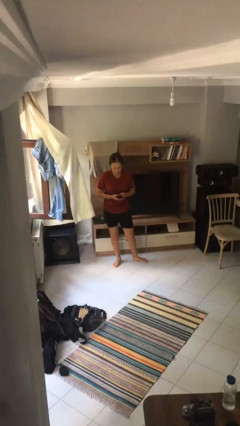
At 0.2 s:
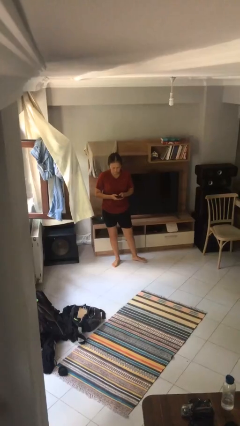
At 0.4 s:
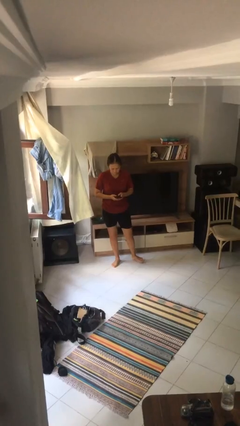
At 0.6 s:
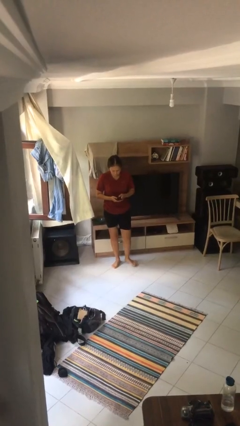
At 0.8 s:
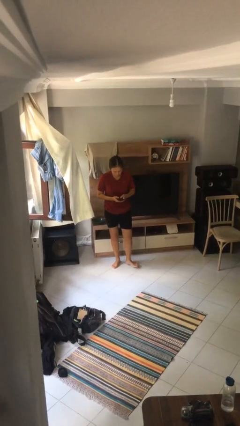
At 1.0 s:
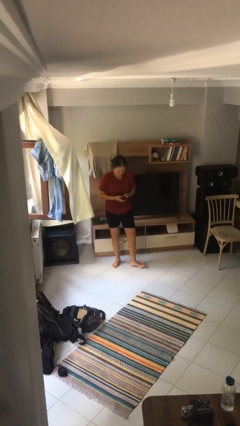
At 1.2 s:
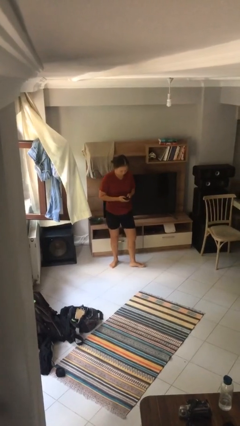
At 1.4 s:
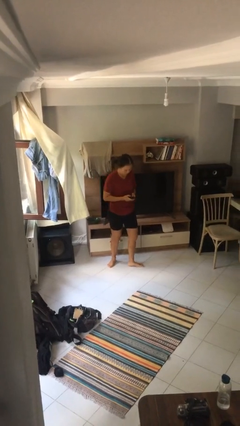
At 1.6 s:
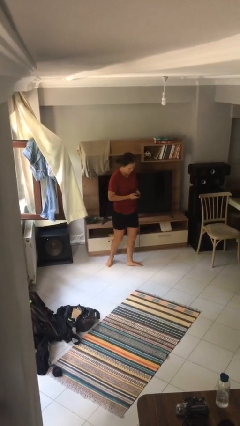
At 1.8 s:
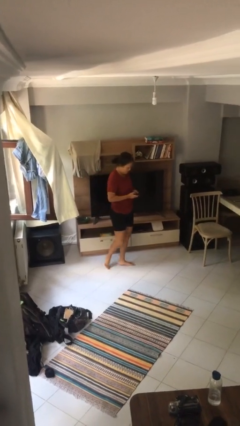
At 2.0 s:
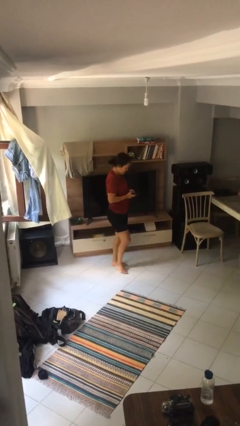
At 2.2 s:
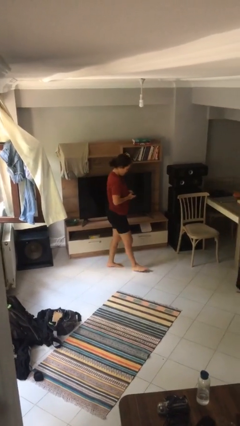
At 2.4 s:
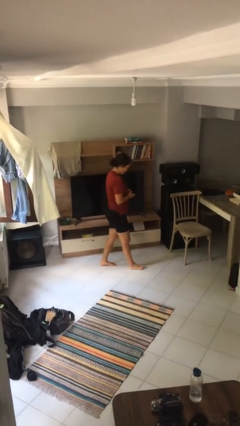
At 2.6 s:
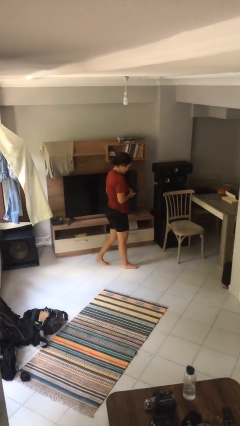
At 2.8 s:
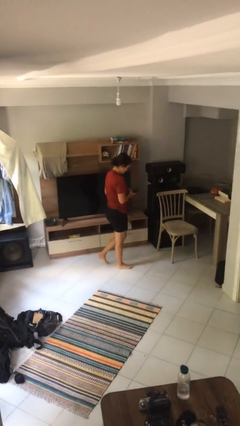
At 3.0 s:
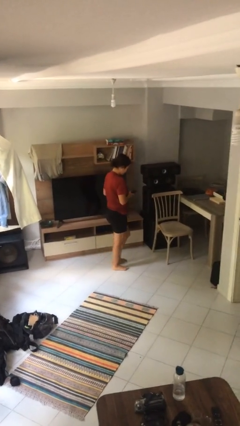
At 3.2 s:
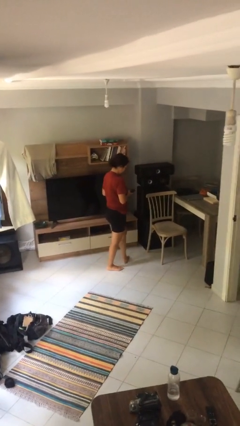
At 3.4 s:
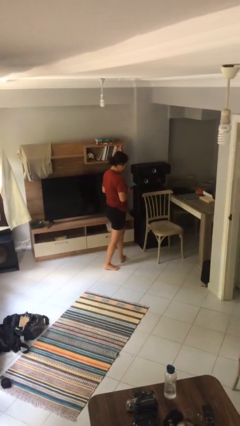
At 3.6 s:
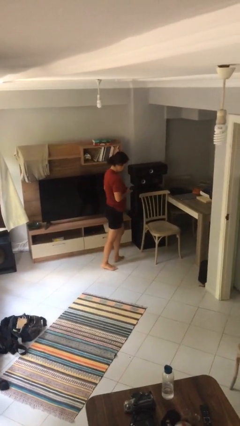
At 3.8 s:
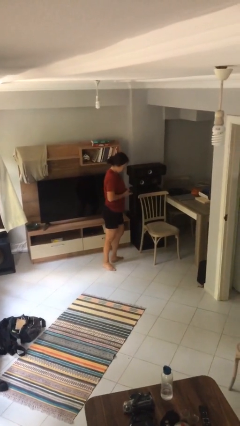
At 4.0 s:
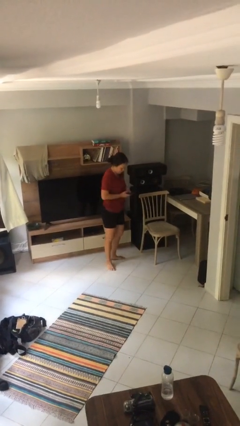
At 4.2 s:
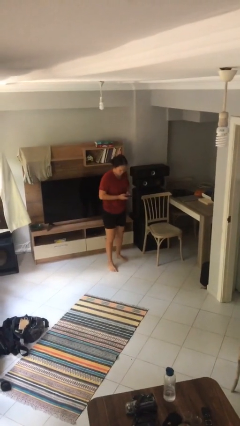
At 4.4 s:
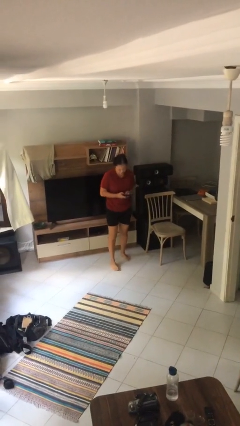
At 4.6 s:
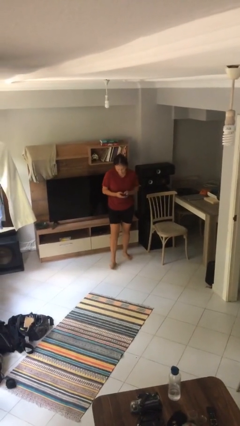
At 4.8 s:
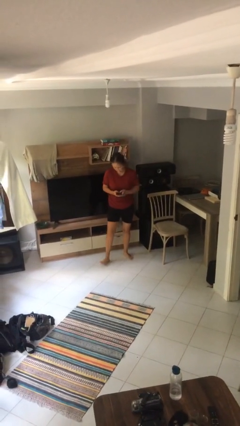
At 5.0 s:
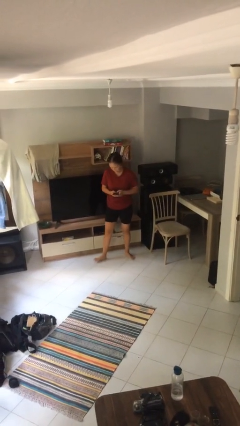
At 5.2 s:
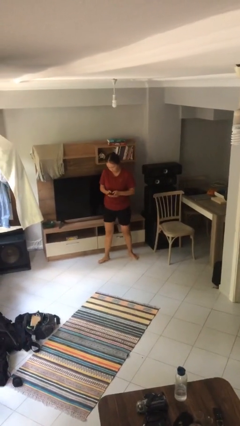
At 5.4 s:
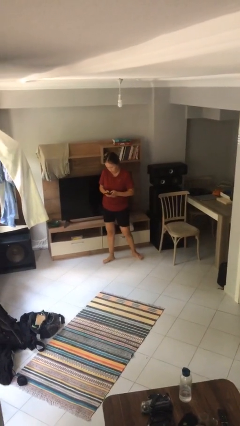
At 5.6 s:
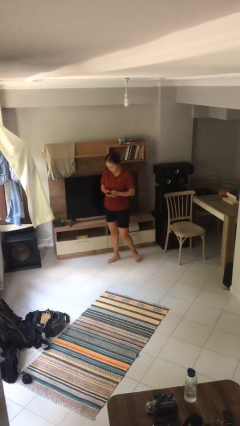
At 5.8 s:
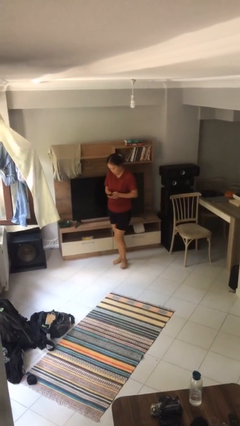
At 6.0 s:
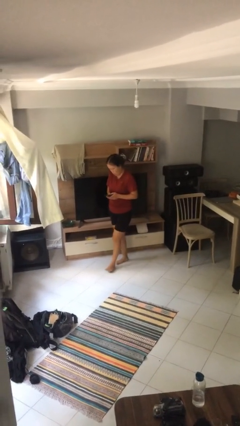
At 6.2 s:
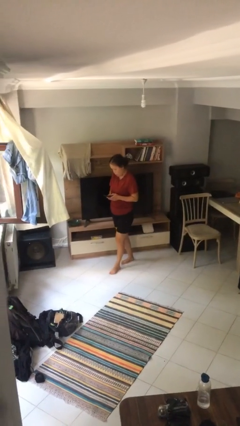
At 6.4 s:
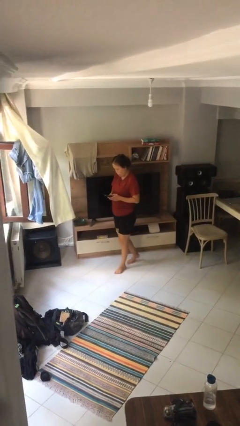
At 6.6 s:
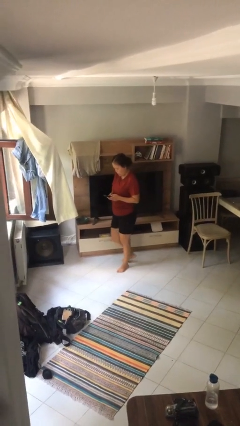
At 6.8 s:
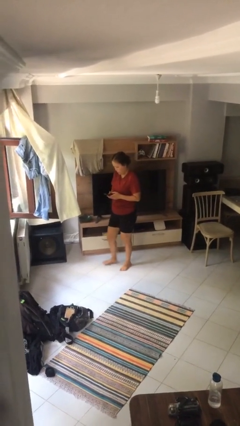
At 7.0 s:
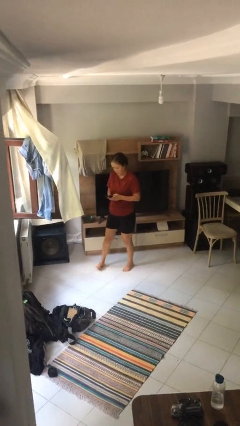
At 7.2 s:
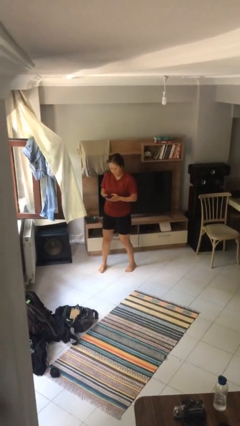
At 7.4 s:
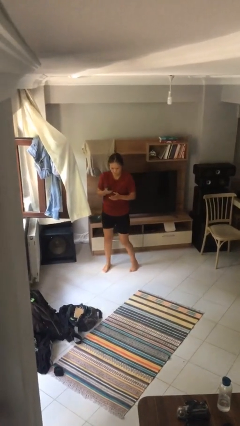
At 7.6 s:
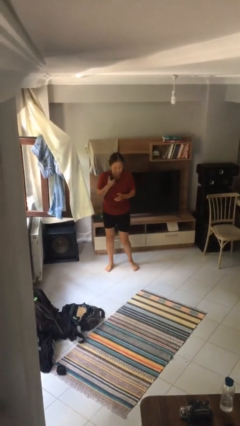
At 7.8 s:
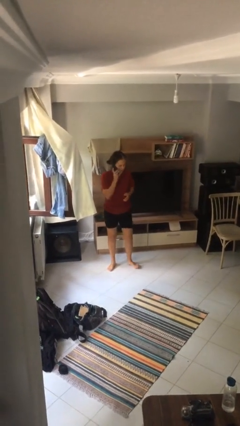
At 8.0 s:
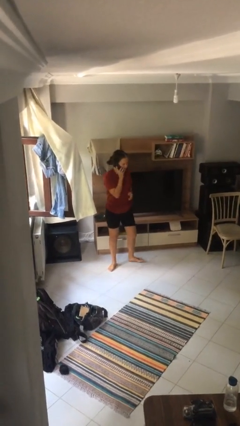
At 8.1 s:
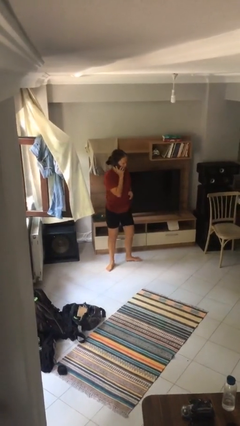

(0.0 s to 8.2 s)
person texts on phone

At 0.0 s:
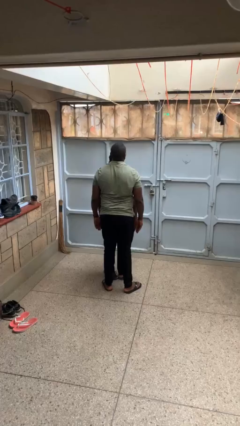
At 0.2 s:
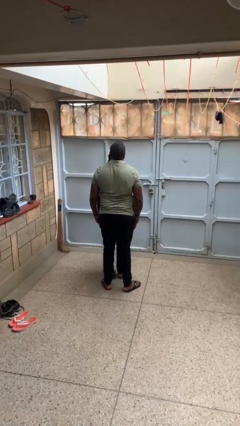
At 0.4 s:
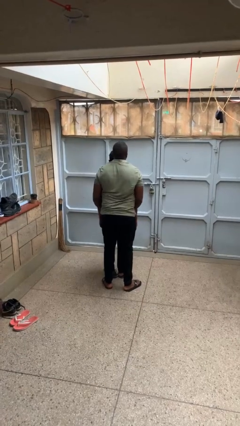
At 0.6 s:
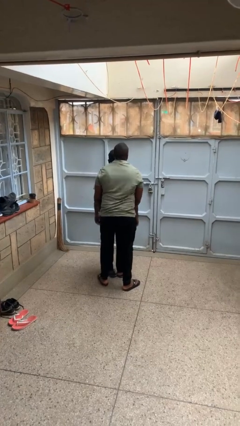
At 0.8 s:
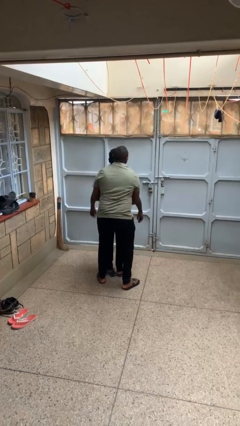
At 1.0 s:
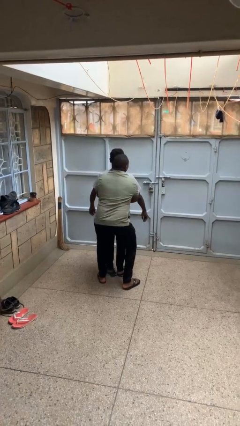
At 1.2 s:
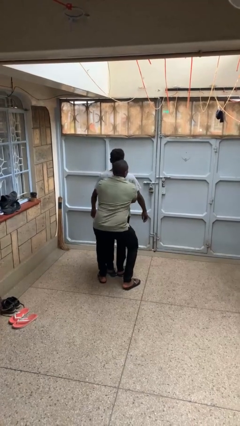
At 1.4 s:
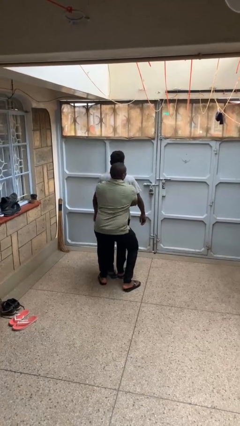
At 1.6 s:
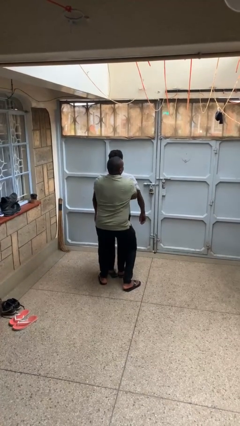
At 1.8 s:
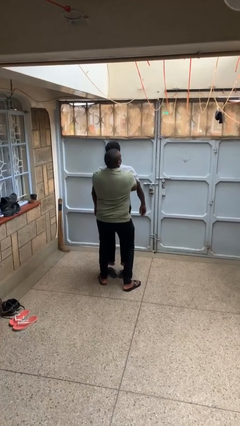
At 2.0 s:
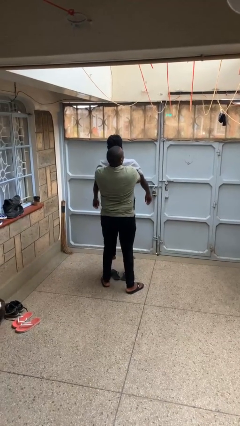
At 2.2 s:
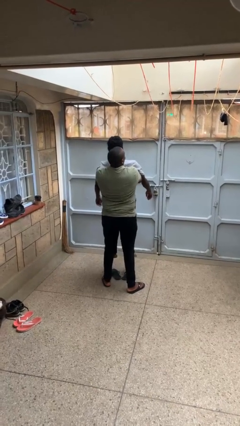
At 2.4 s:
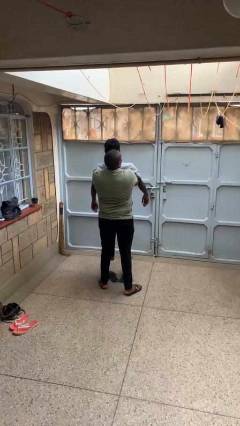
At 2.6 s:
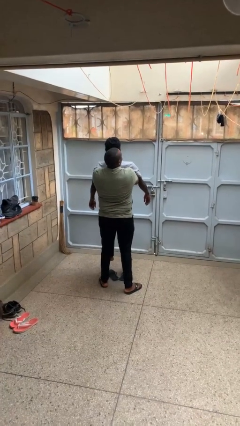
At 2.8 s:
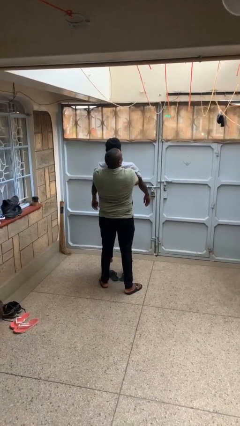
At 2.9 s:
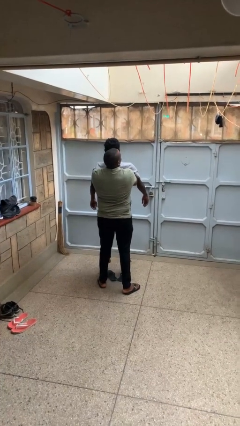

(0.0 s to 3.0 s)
person picks up person

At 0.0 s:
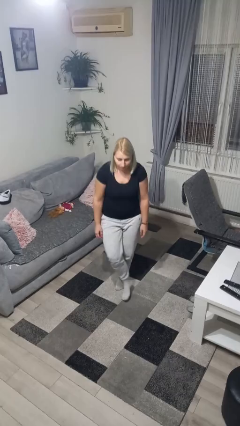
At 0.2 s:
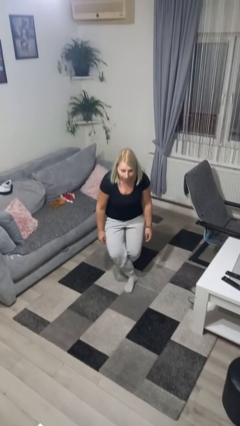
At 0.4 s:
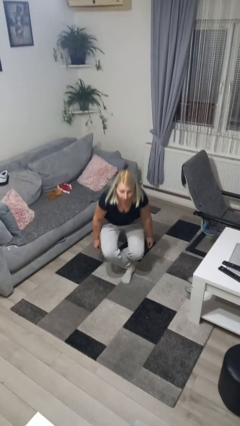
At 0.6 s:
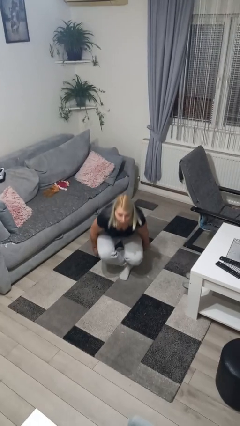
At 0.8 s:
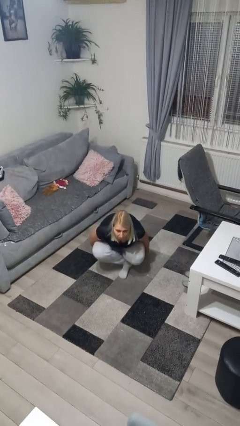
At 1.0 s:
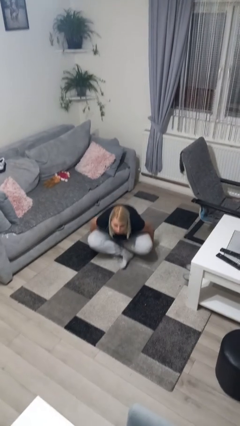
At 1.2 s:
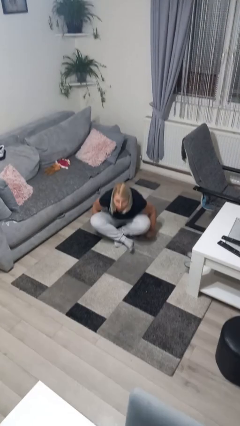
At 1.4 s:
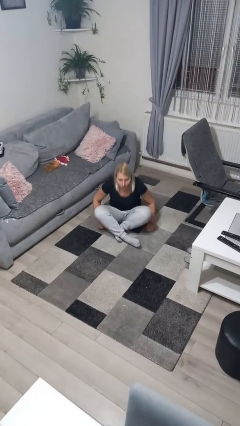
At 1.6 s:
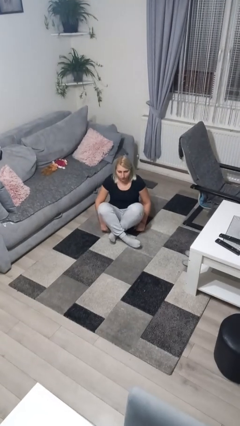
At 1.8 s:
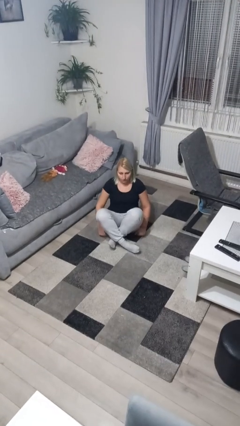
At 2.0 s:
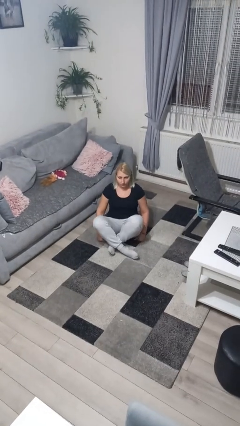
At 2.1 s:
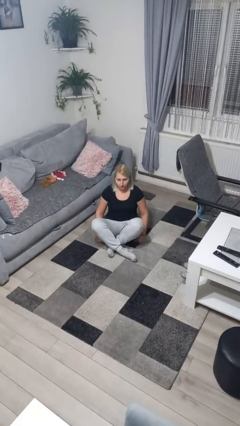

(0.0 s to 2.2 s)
person sits crisscross

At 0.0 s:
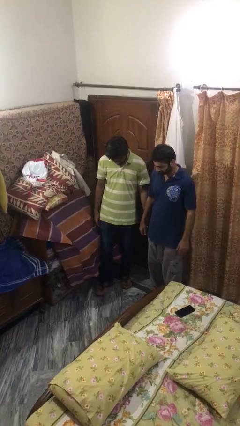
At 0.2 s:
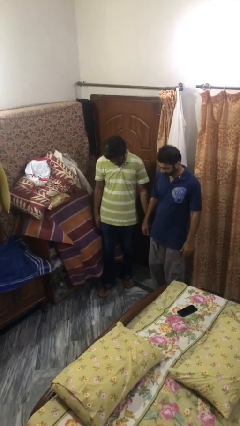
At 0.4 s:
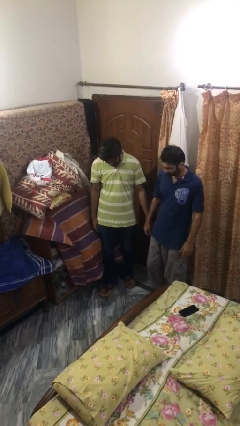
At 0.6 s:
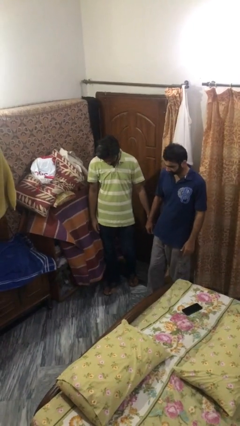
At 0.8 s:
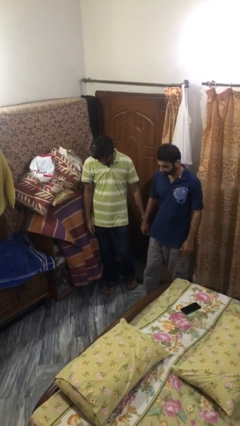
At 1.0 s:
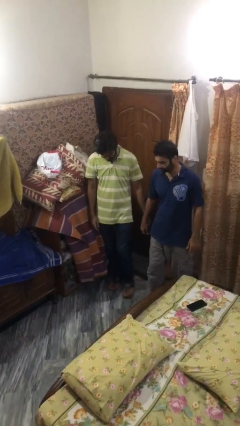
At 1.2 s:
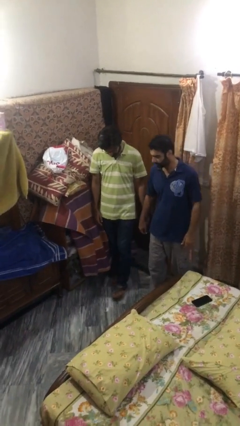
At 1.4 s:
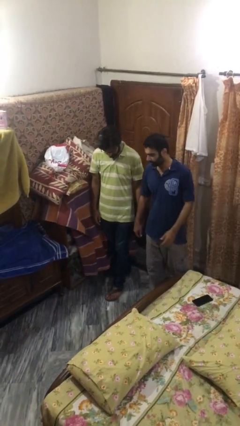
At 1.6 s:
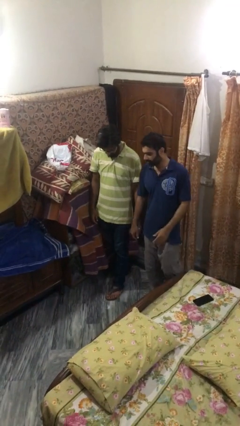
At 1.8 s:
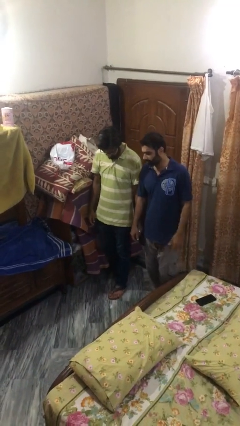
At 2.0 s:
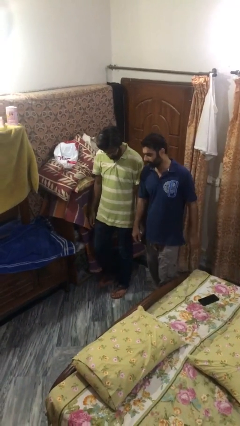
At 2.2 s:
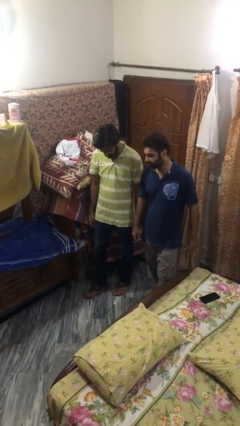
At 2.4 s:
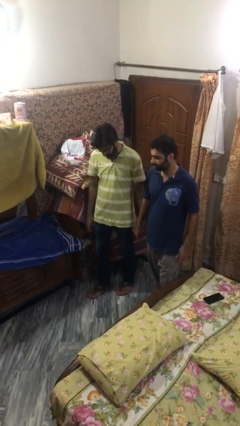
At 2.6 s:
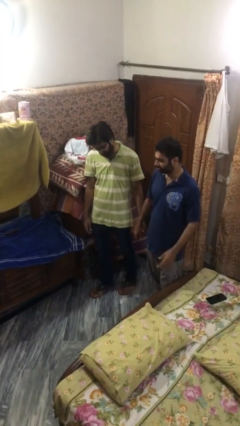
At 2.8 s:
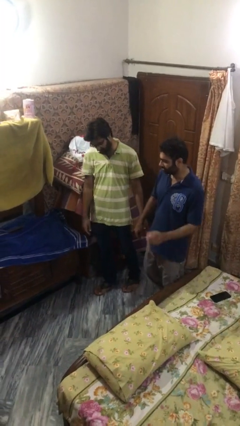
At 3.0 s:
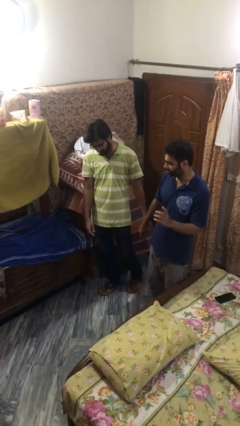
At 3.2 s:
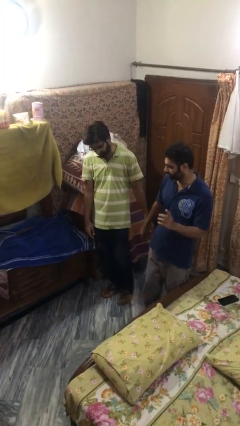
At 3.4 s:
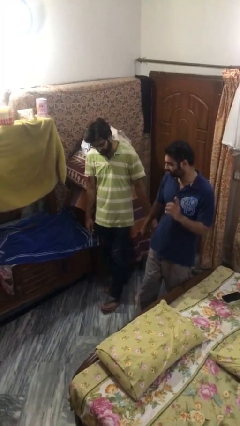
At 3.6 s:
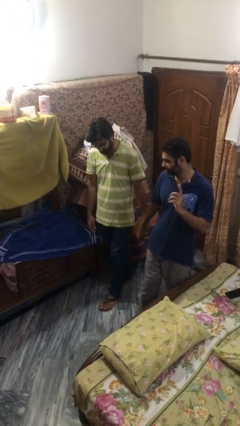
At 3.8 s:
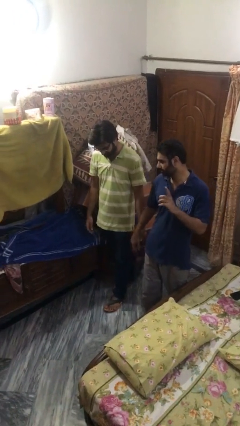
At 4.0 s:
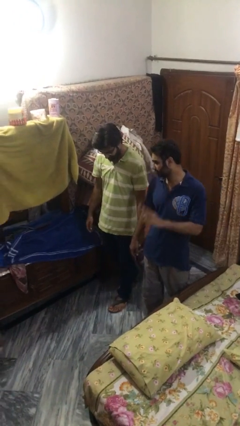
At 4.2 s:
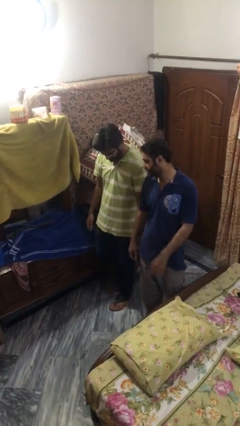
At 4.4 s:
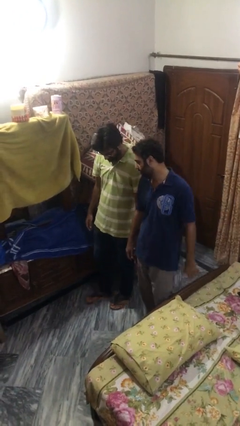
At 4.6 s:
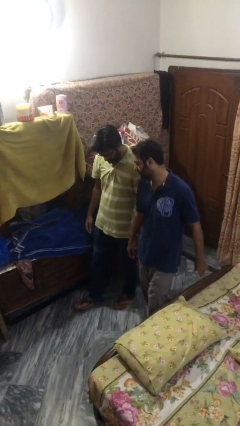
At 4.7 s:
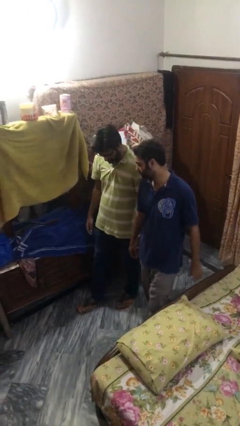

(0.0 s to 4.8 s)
person holds hand
